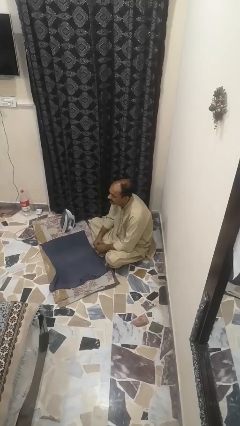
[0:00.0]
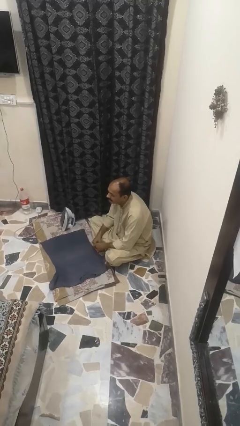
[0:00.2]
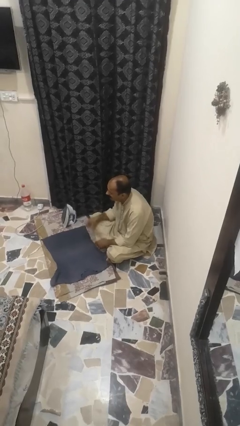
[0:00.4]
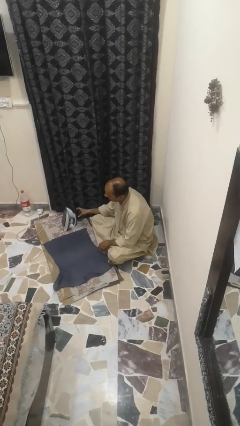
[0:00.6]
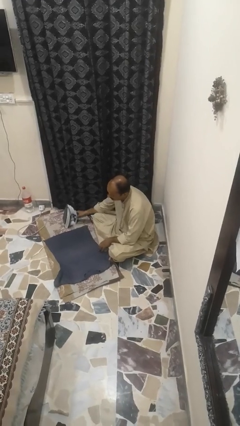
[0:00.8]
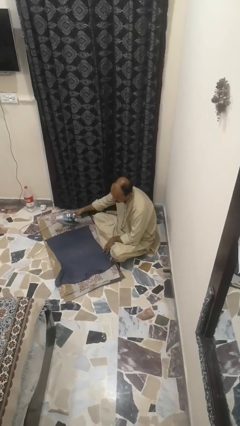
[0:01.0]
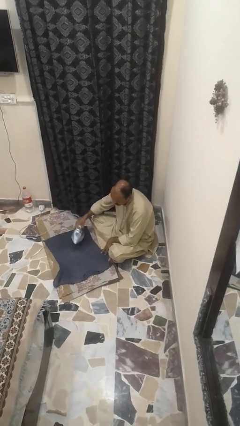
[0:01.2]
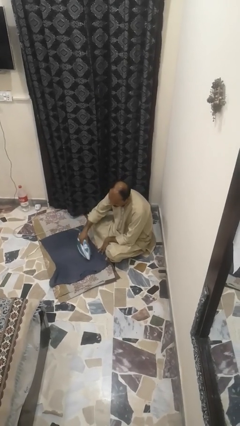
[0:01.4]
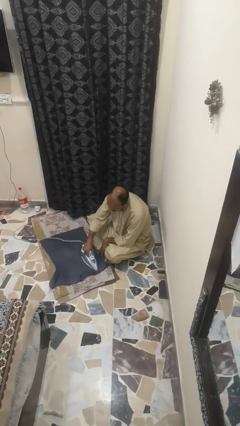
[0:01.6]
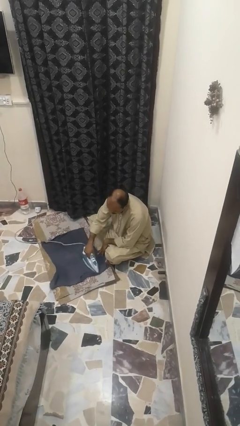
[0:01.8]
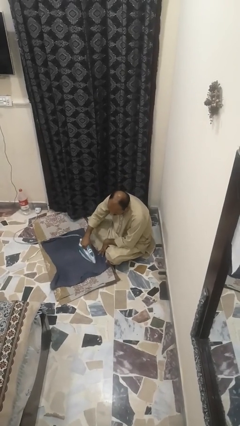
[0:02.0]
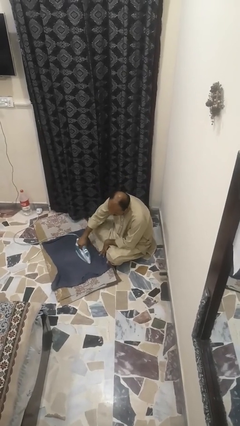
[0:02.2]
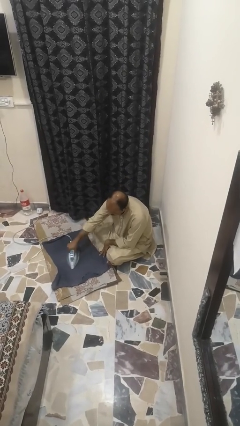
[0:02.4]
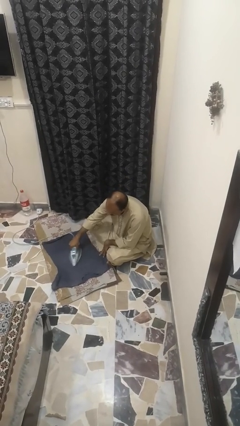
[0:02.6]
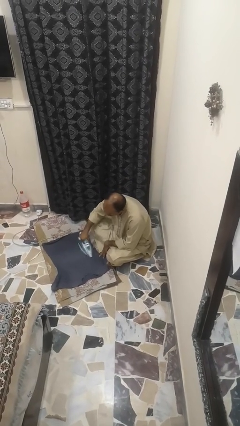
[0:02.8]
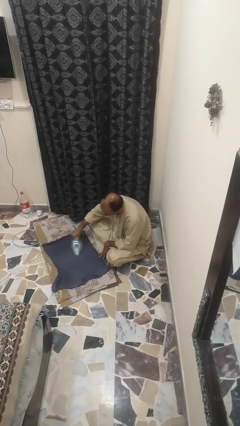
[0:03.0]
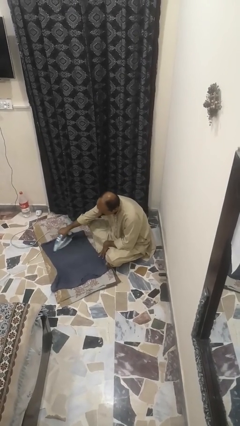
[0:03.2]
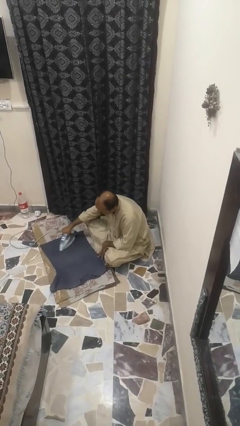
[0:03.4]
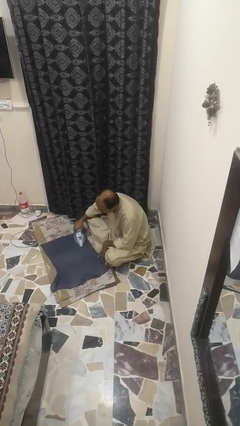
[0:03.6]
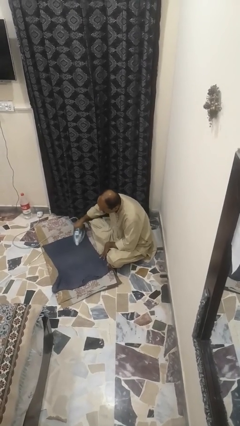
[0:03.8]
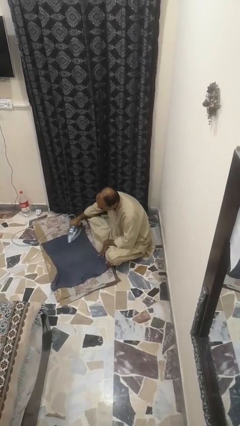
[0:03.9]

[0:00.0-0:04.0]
person irons clothes

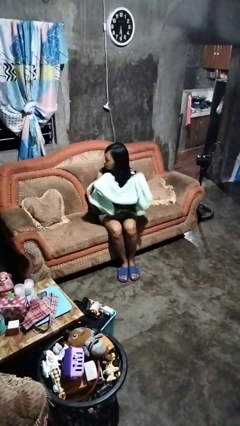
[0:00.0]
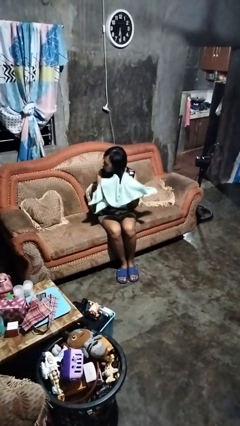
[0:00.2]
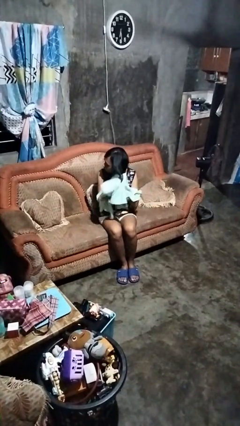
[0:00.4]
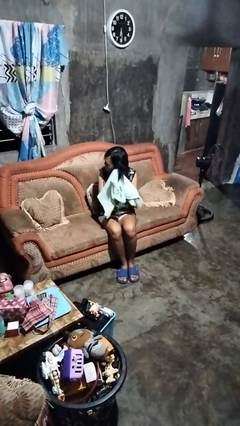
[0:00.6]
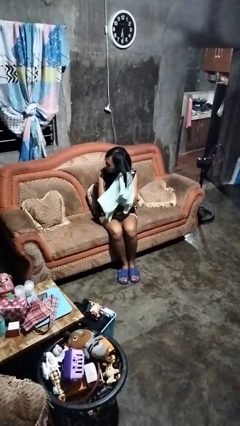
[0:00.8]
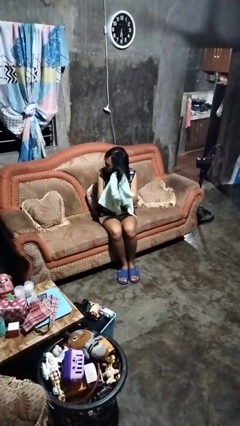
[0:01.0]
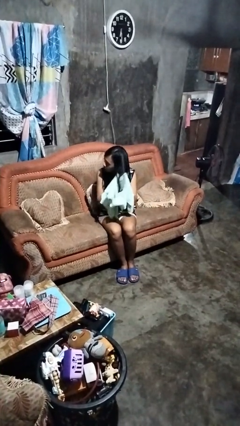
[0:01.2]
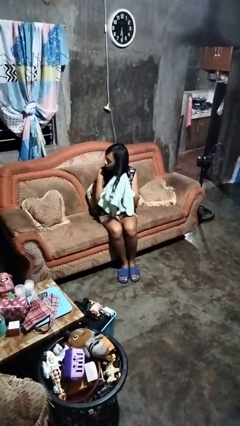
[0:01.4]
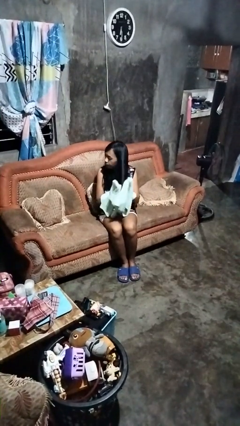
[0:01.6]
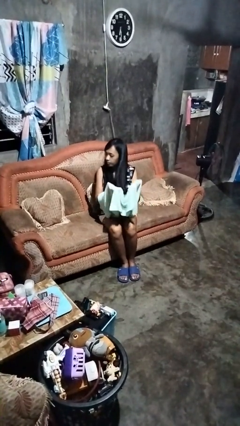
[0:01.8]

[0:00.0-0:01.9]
person dries hair with towel

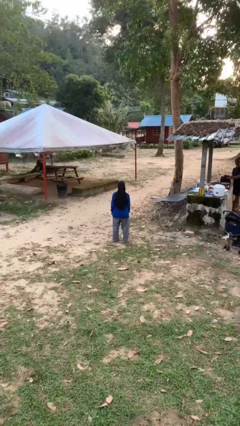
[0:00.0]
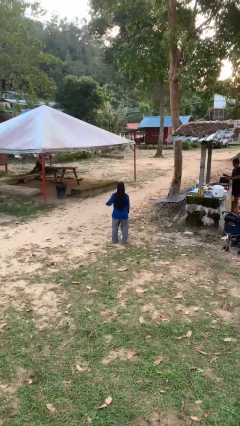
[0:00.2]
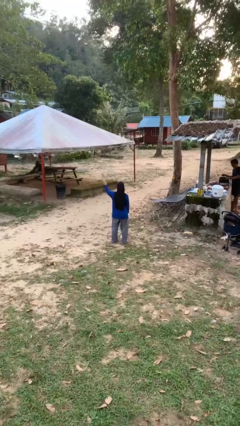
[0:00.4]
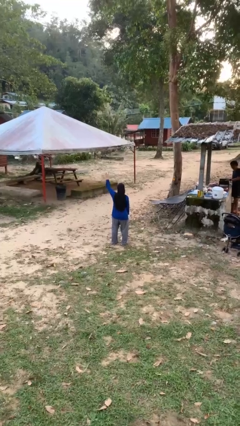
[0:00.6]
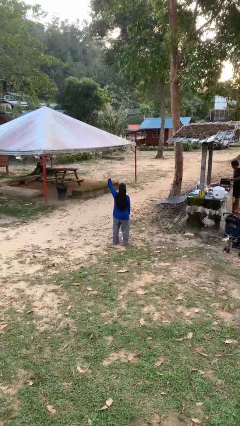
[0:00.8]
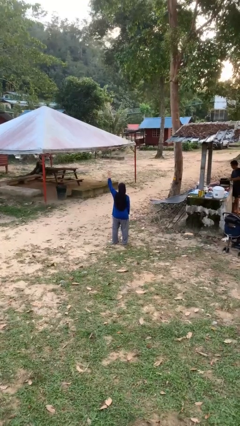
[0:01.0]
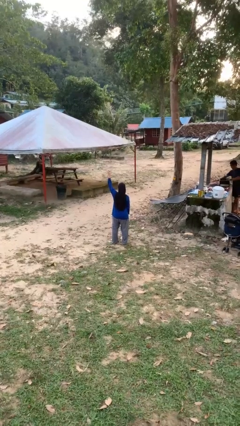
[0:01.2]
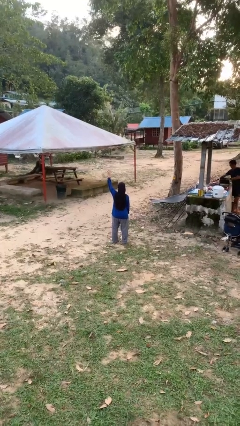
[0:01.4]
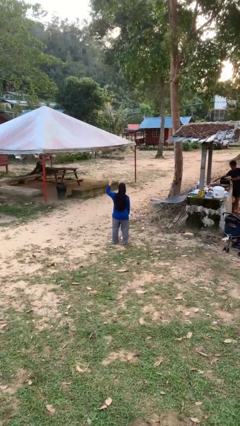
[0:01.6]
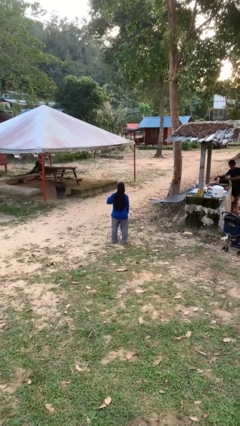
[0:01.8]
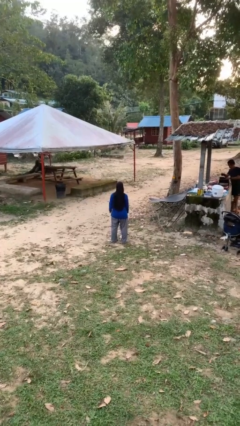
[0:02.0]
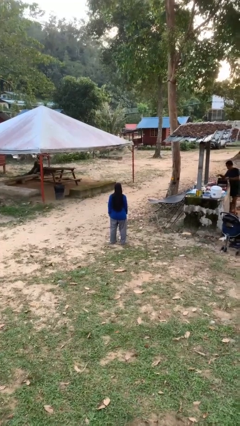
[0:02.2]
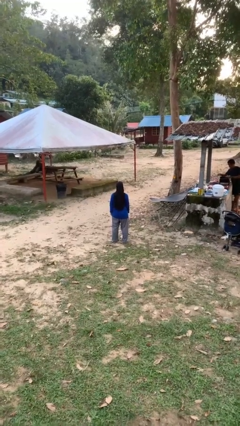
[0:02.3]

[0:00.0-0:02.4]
person gestures number four

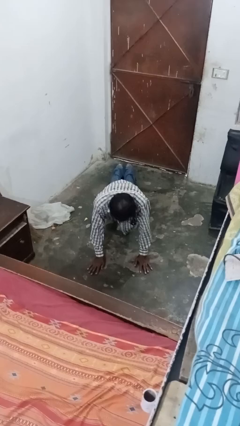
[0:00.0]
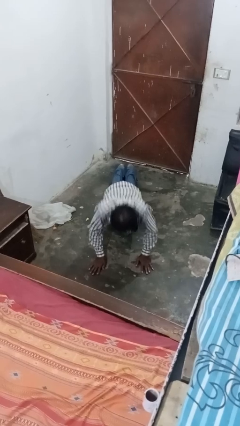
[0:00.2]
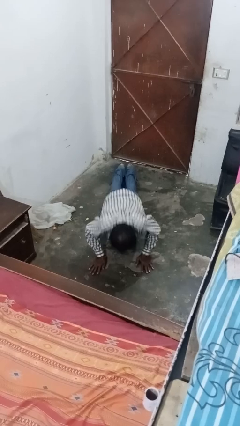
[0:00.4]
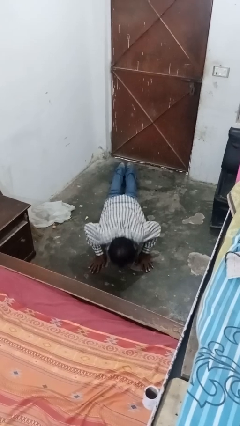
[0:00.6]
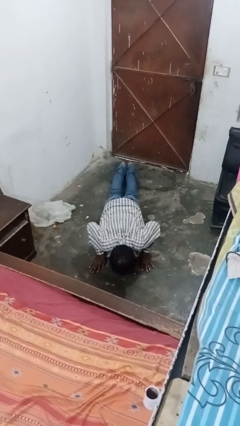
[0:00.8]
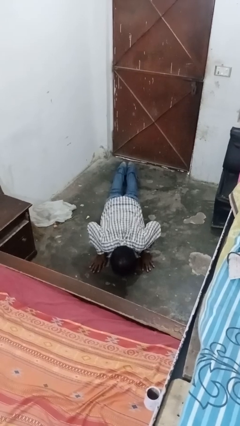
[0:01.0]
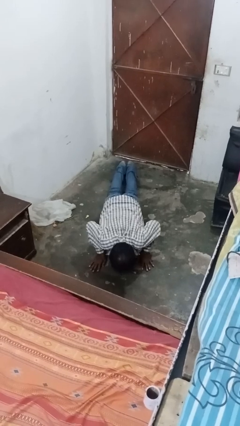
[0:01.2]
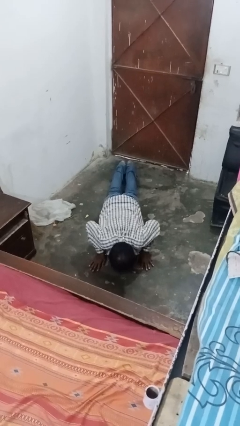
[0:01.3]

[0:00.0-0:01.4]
person exercises with pushup

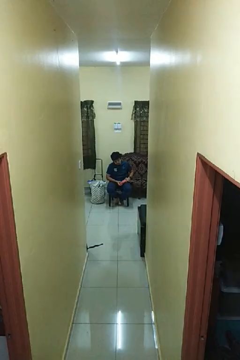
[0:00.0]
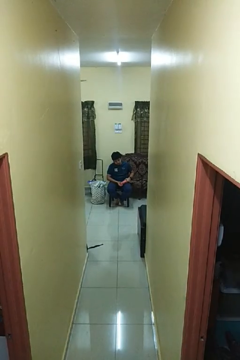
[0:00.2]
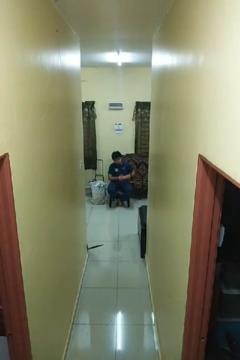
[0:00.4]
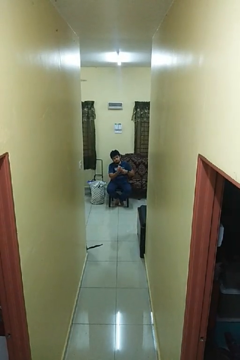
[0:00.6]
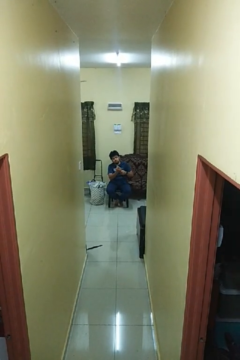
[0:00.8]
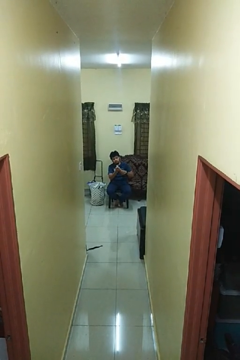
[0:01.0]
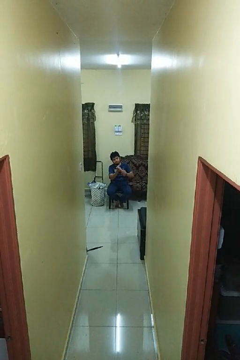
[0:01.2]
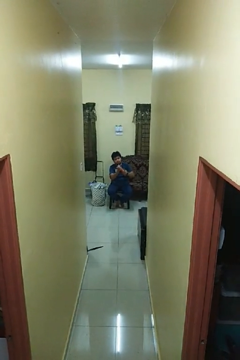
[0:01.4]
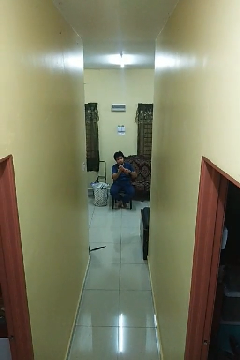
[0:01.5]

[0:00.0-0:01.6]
person squeezes object

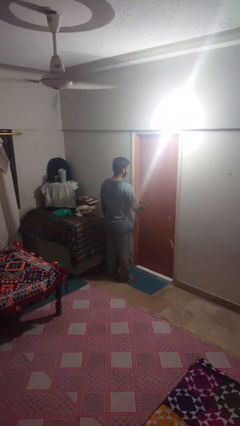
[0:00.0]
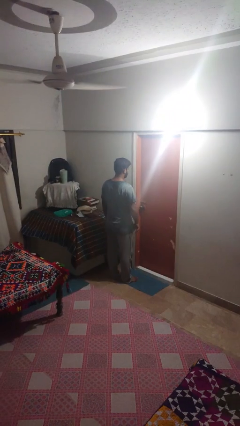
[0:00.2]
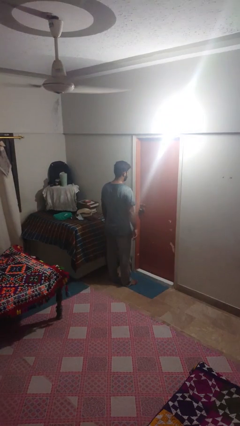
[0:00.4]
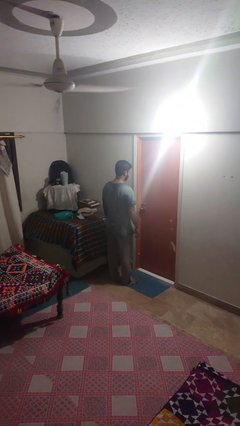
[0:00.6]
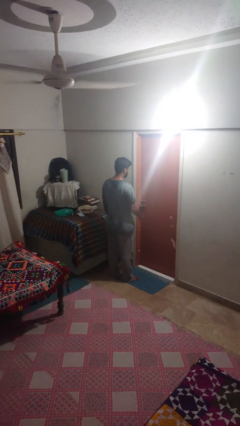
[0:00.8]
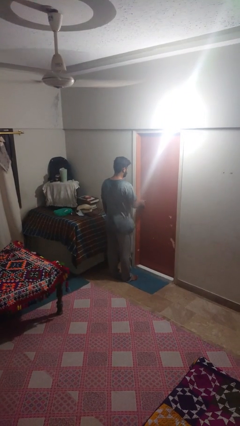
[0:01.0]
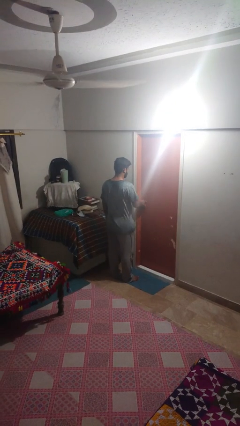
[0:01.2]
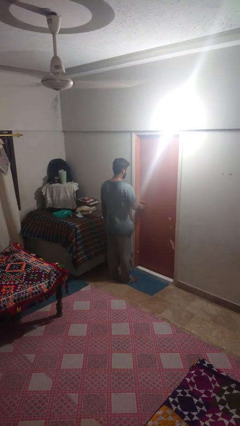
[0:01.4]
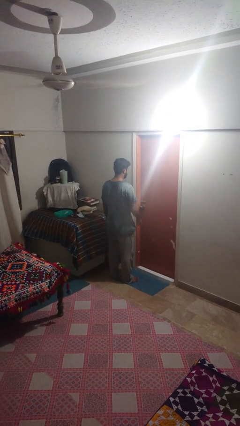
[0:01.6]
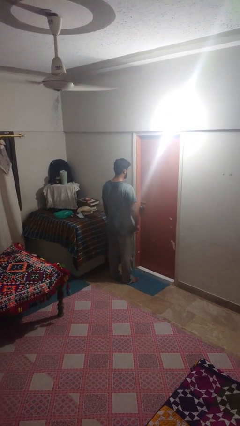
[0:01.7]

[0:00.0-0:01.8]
person locks door with keys

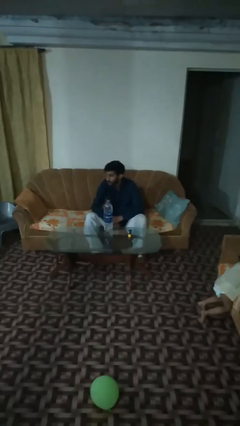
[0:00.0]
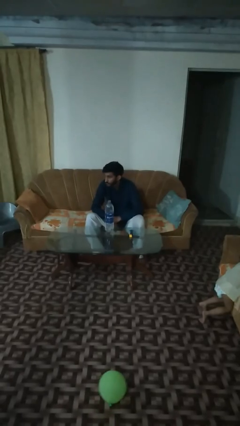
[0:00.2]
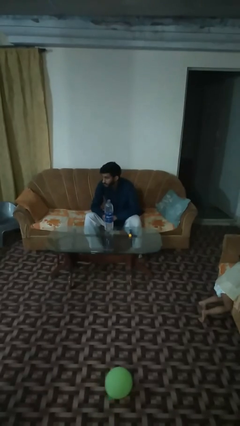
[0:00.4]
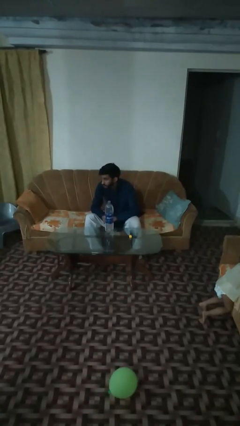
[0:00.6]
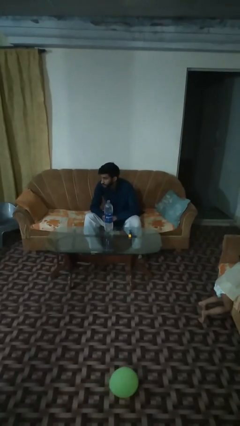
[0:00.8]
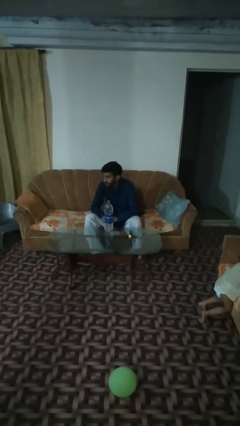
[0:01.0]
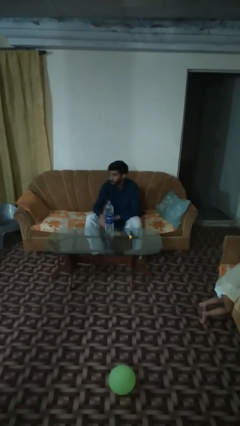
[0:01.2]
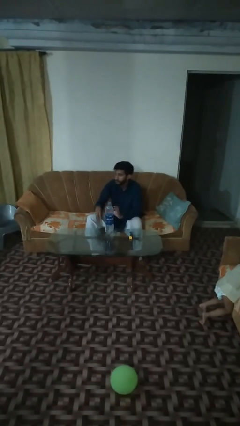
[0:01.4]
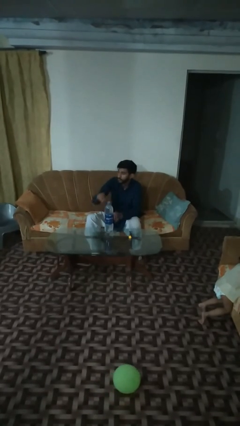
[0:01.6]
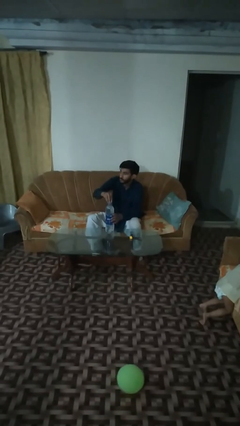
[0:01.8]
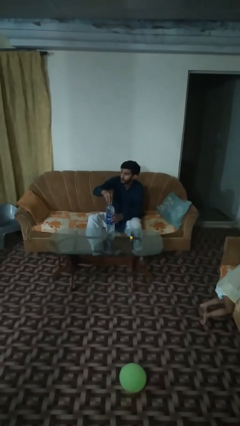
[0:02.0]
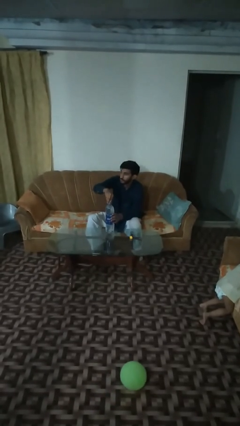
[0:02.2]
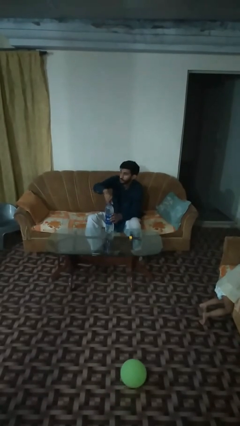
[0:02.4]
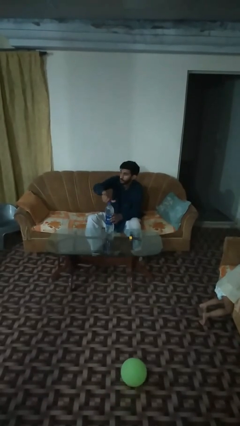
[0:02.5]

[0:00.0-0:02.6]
person screws lid to bottle

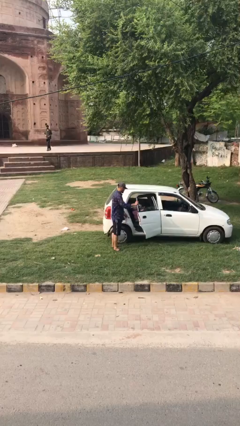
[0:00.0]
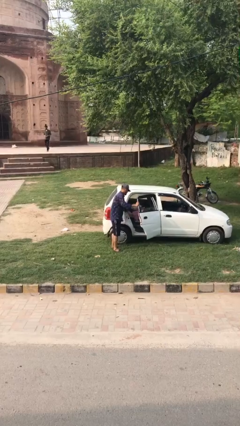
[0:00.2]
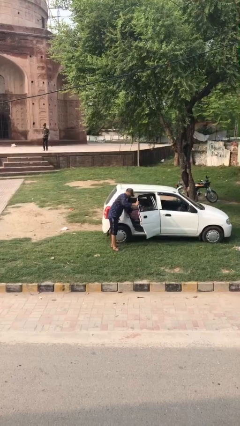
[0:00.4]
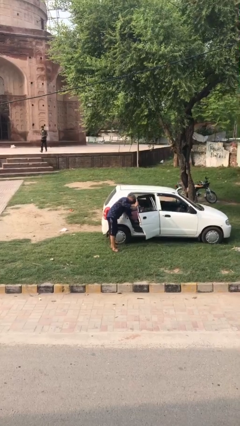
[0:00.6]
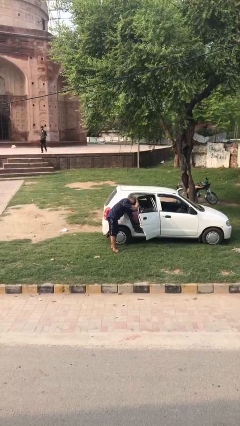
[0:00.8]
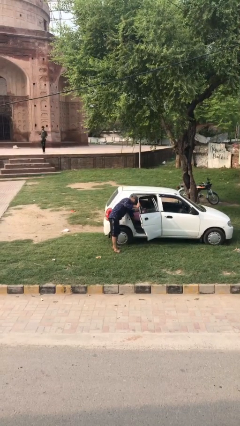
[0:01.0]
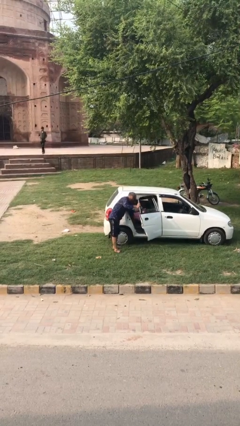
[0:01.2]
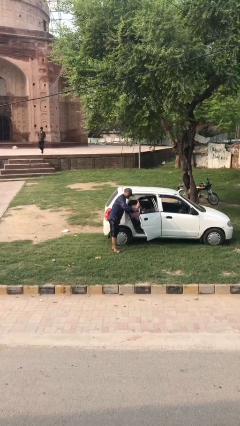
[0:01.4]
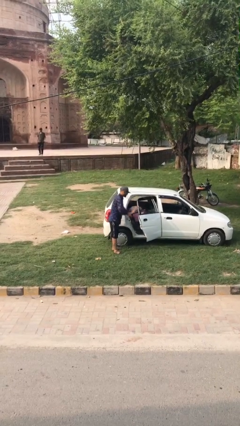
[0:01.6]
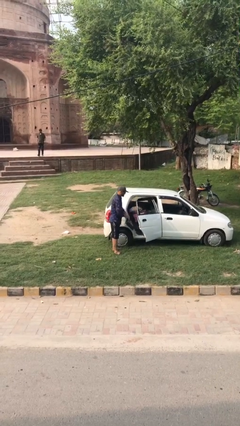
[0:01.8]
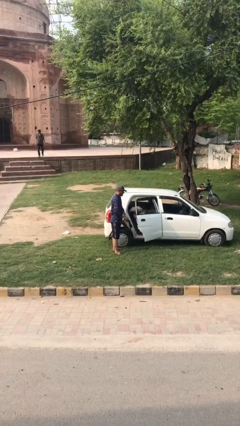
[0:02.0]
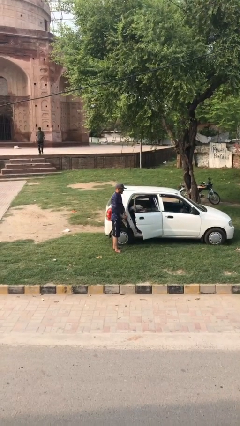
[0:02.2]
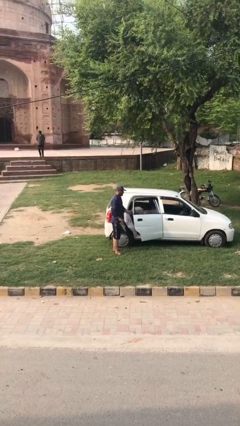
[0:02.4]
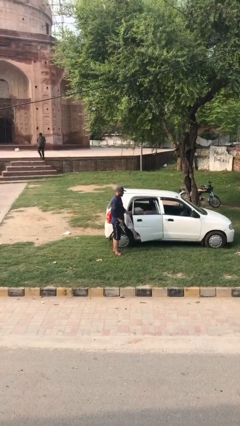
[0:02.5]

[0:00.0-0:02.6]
person unloads car
